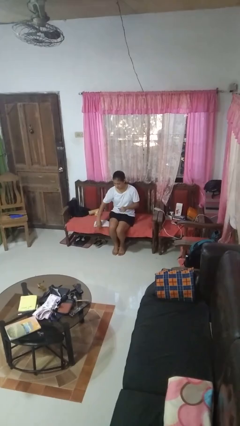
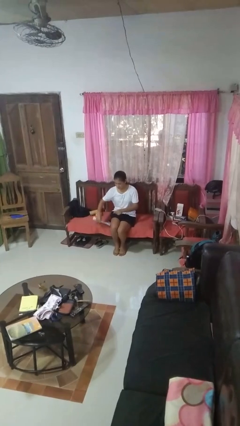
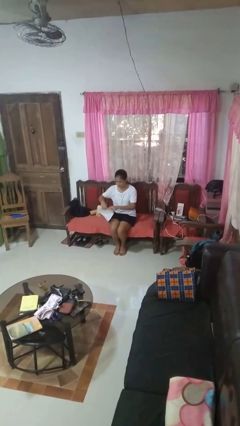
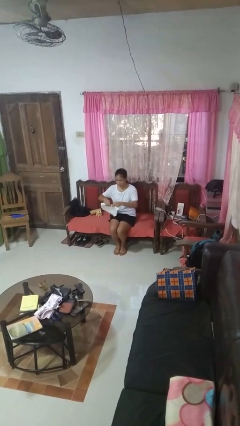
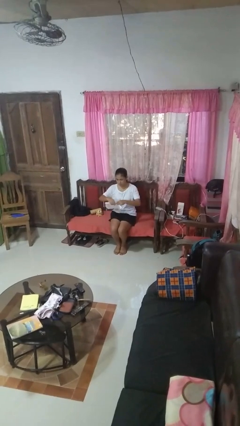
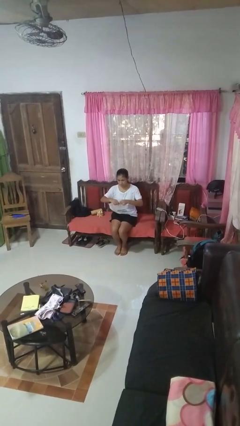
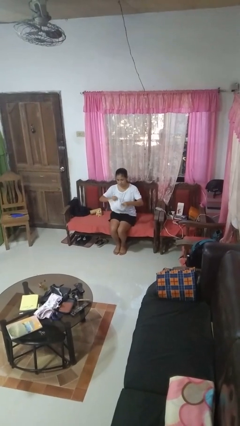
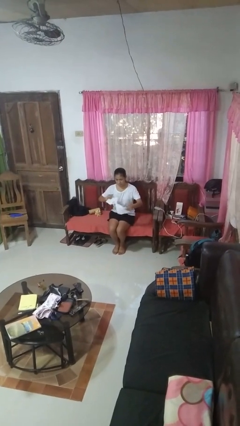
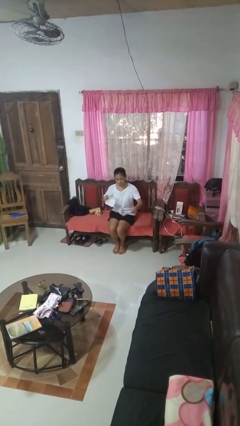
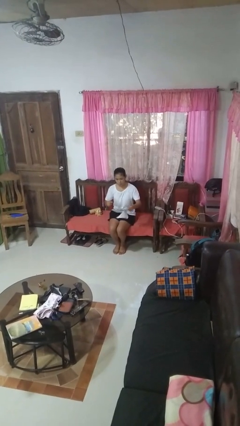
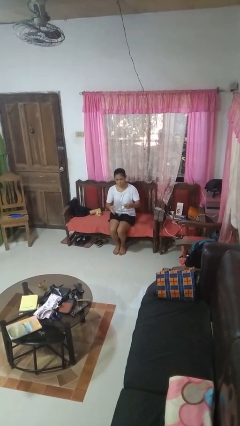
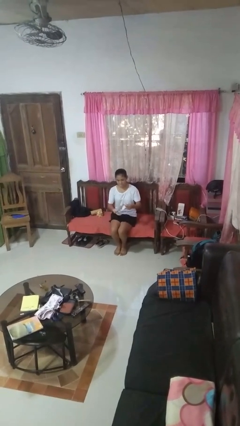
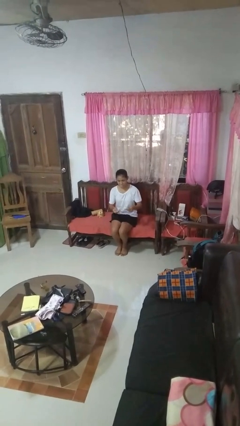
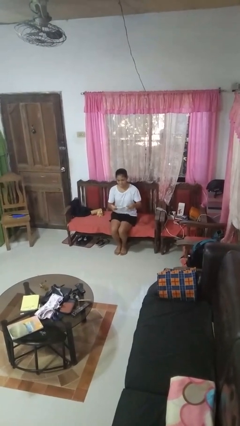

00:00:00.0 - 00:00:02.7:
person tears paper

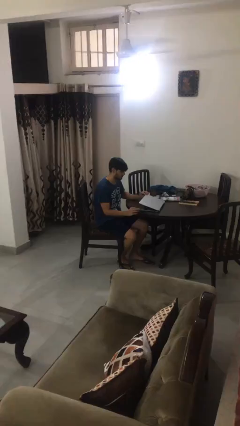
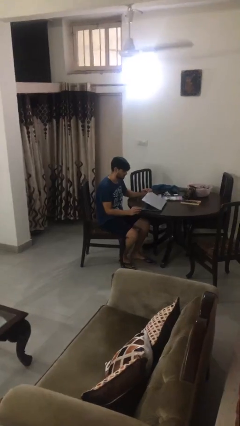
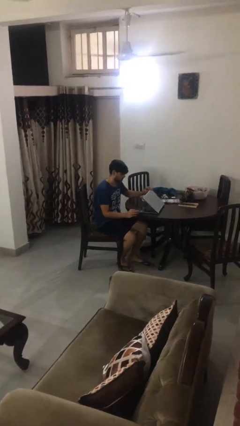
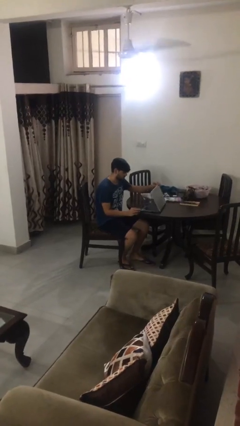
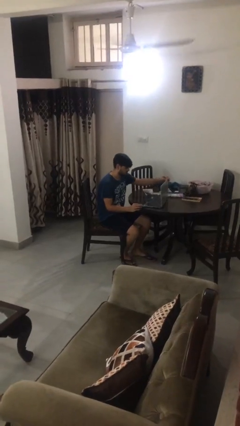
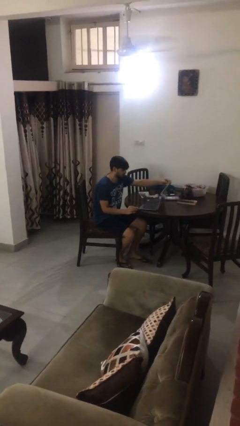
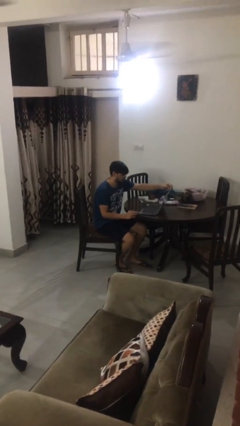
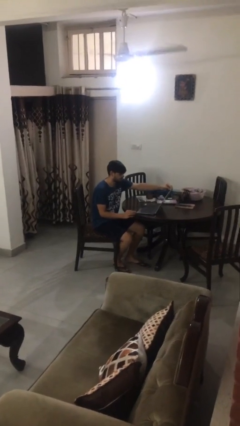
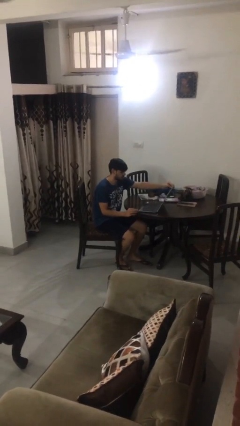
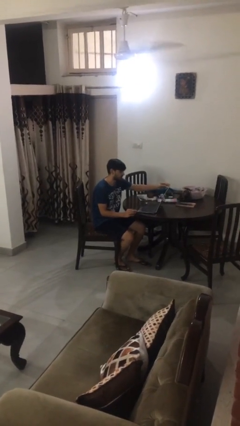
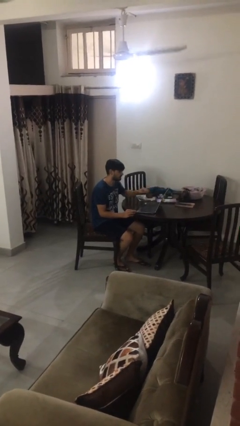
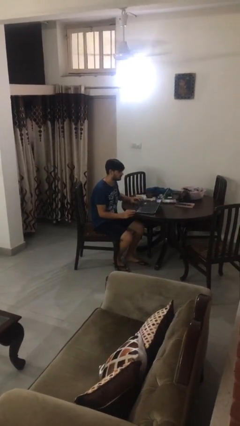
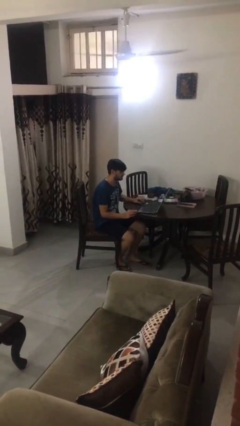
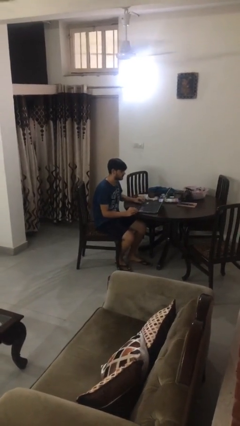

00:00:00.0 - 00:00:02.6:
person opens laptop

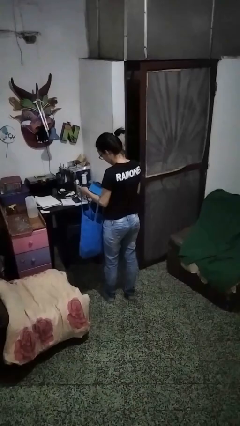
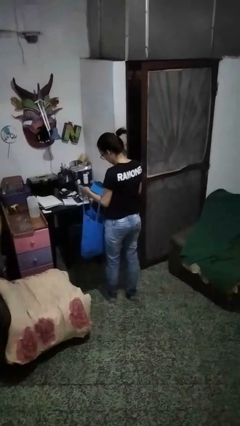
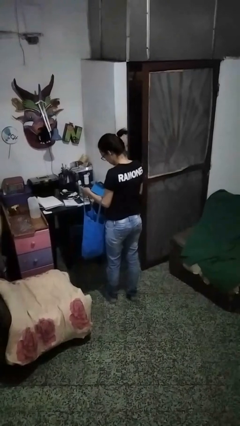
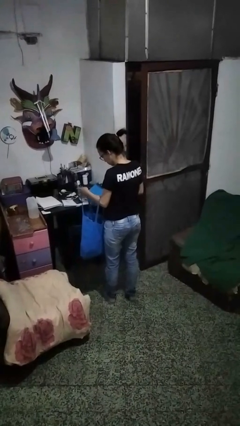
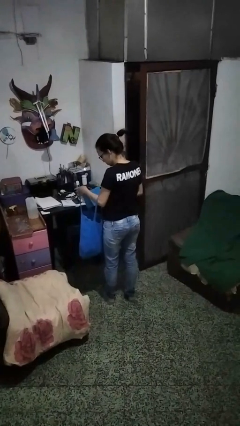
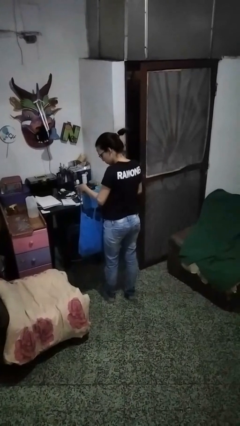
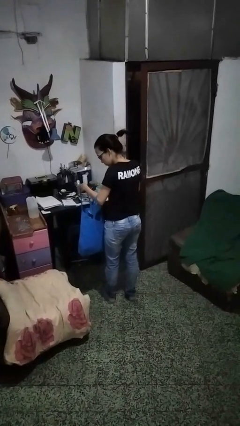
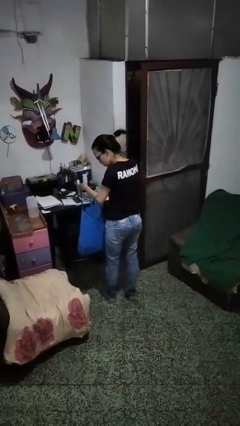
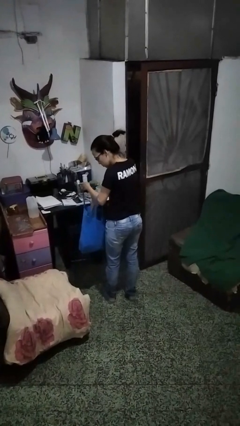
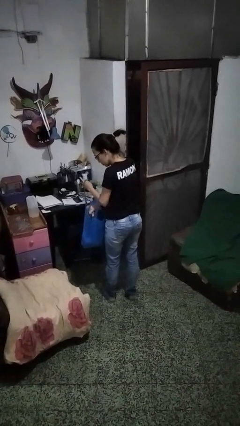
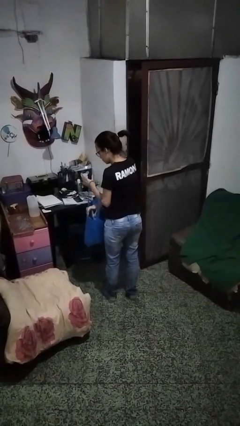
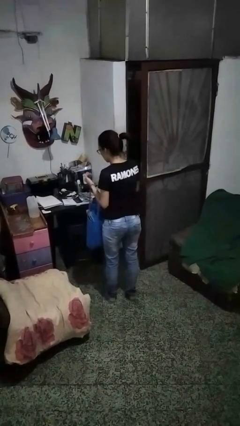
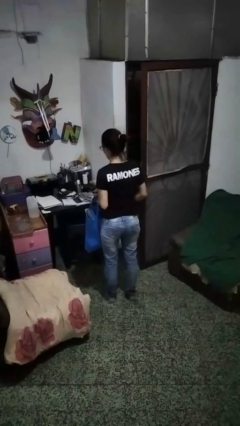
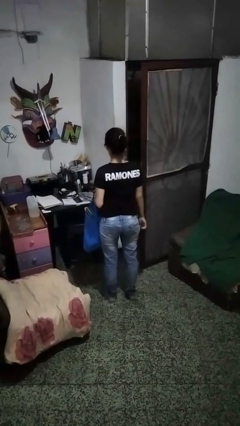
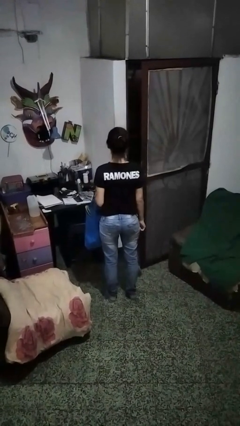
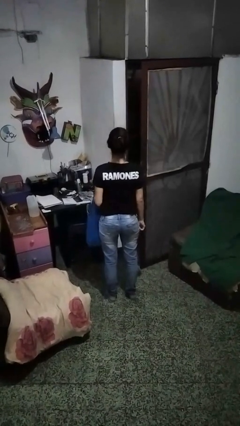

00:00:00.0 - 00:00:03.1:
person puts object into bag

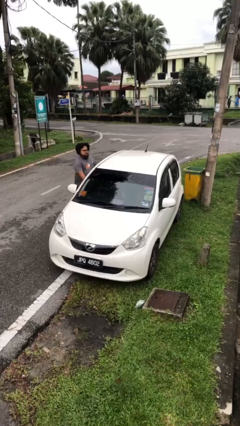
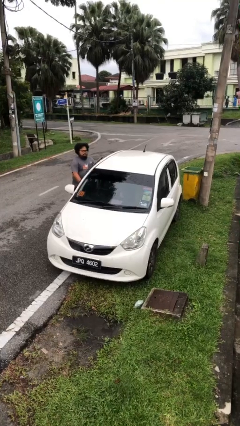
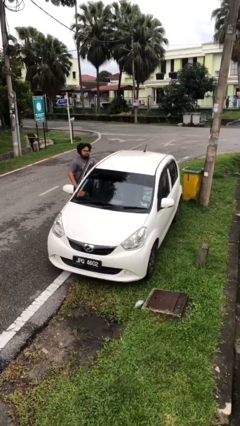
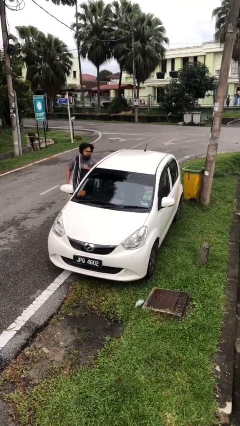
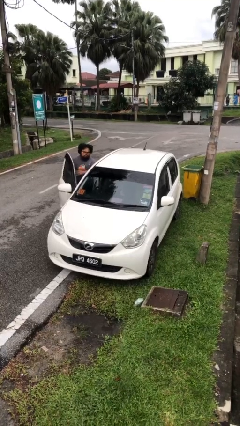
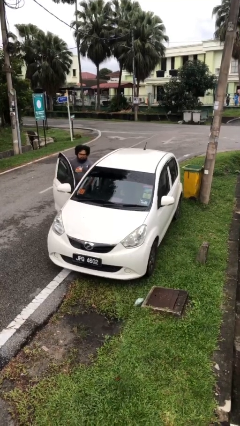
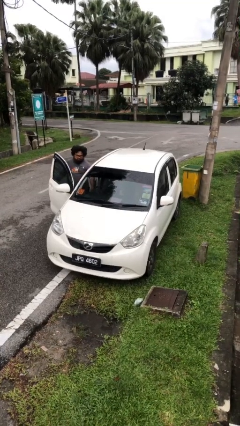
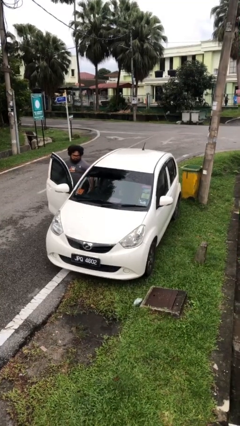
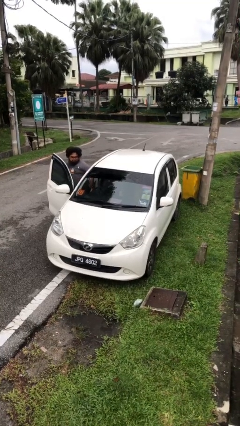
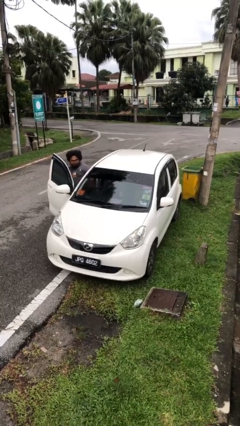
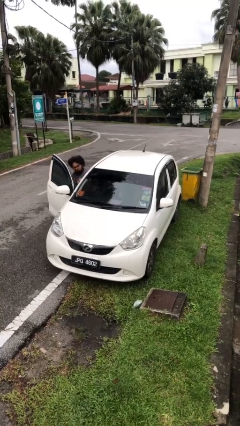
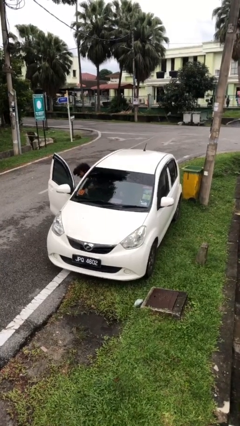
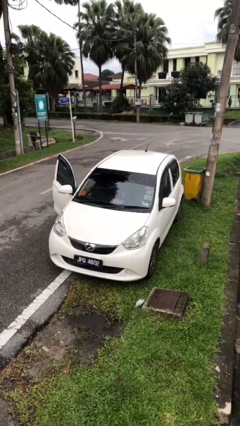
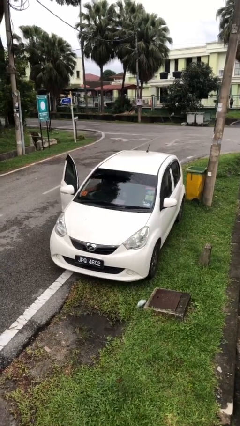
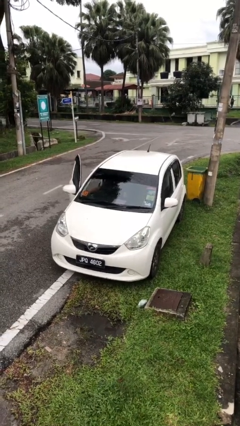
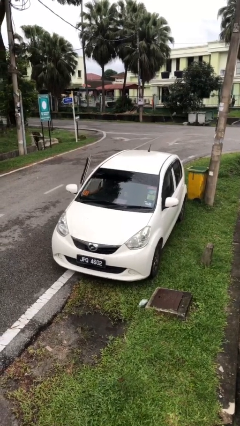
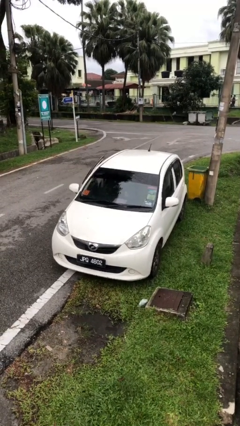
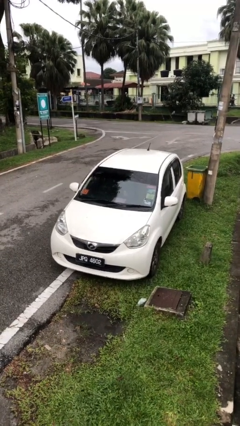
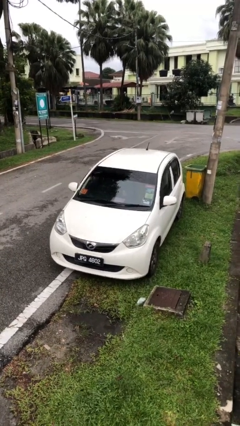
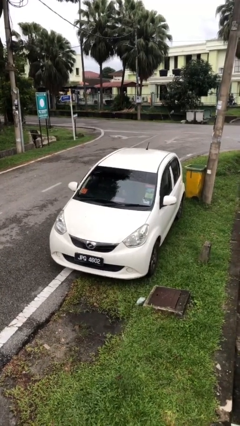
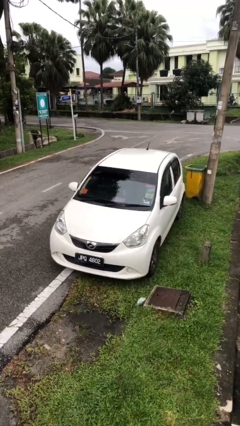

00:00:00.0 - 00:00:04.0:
car picks up person

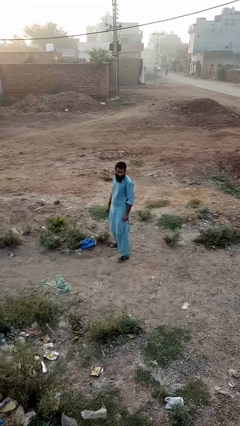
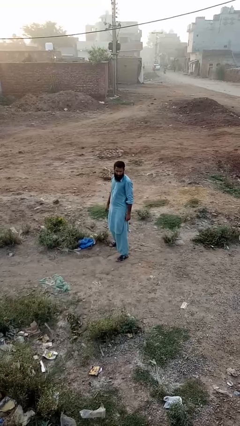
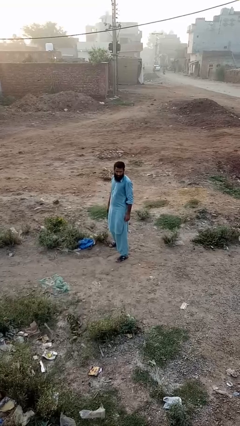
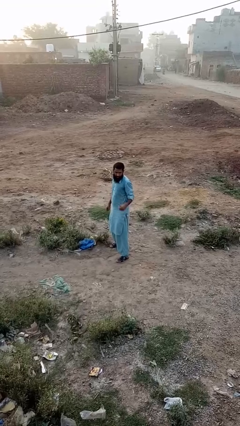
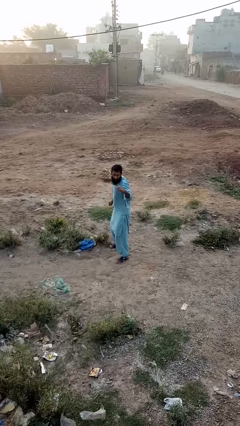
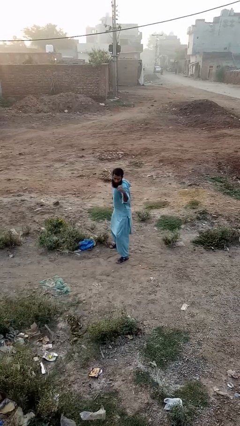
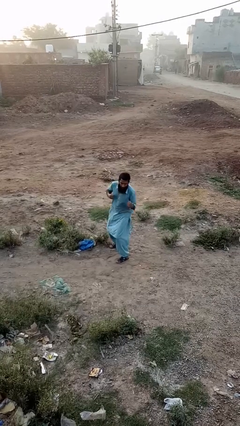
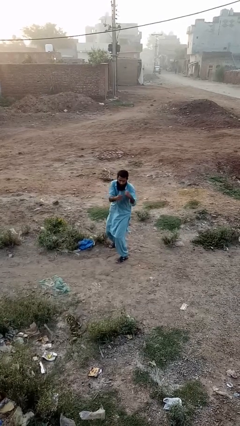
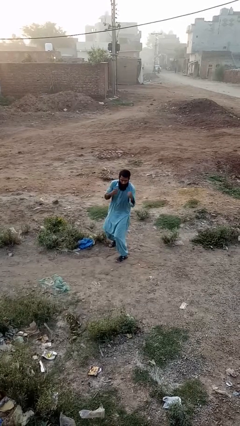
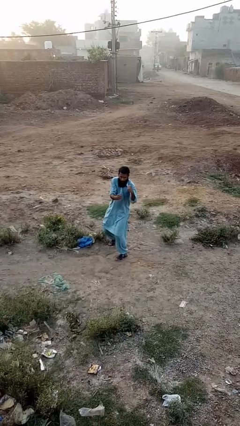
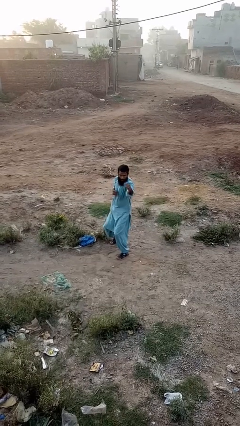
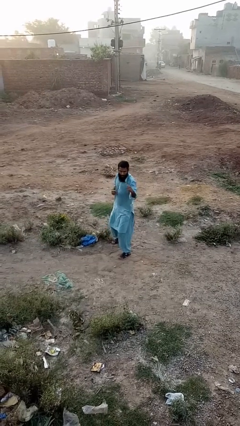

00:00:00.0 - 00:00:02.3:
person punches

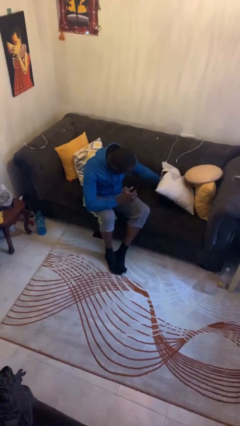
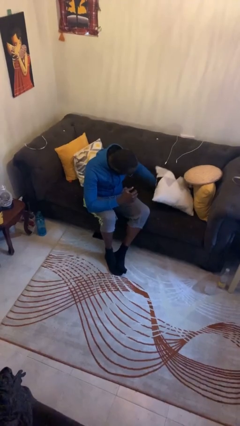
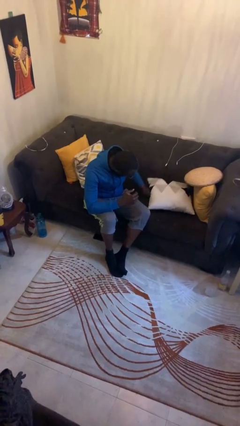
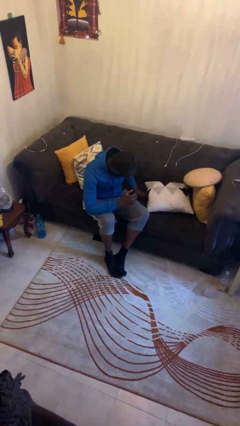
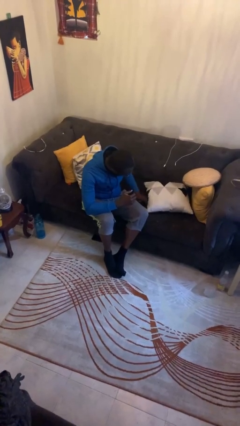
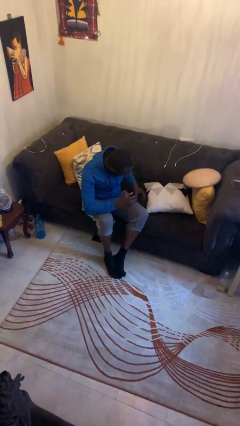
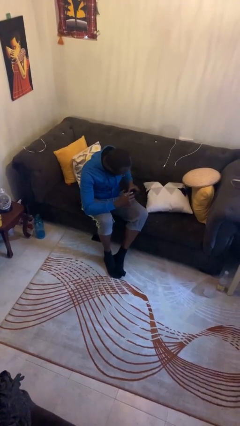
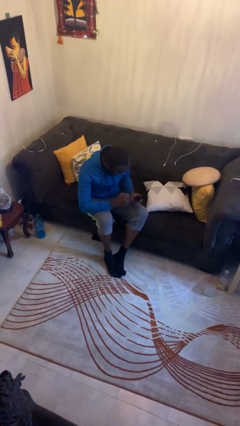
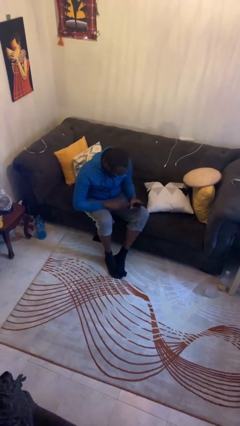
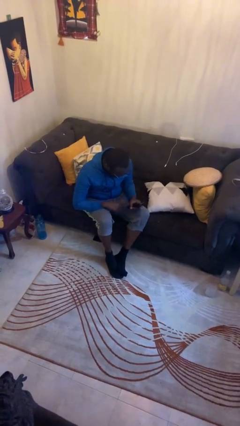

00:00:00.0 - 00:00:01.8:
person searches in couch

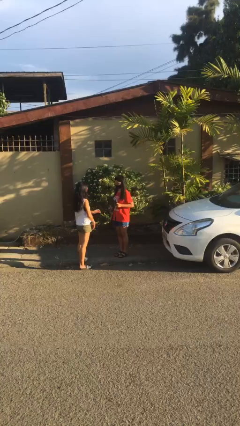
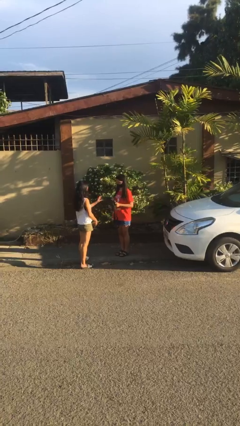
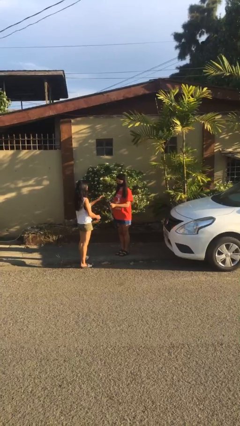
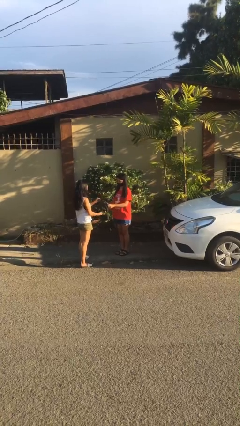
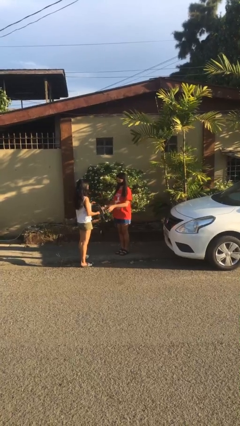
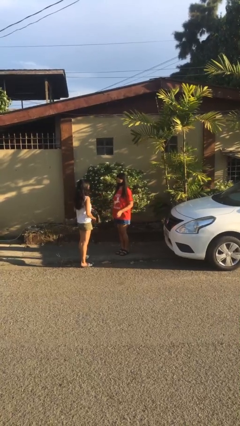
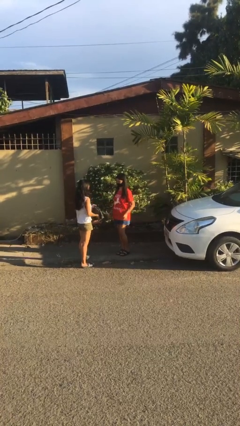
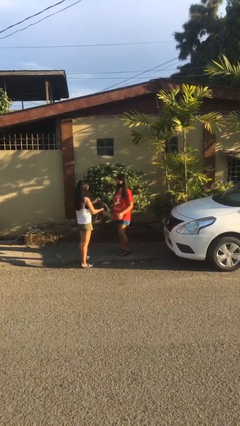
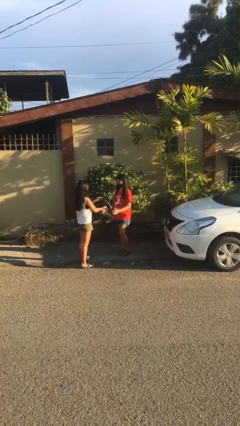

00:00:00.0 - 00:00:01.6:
person transfers object to person
